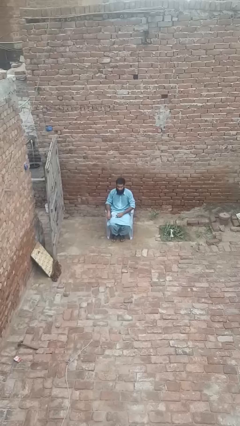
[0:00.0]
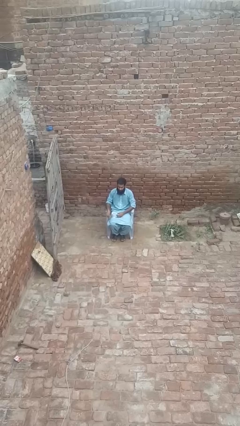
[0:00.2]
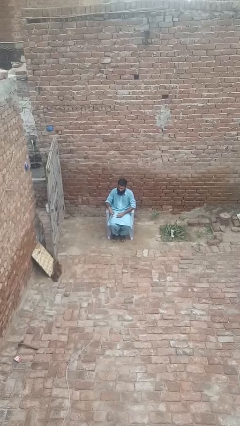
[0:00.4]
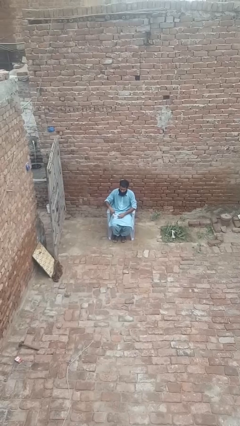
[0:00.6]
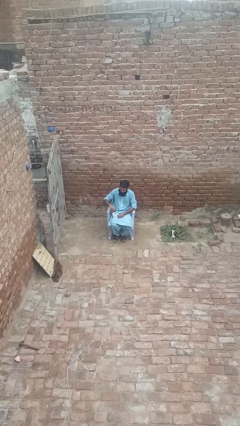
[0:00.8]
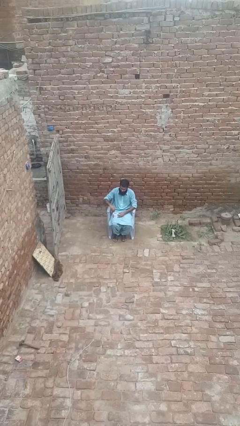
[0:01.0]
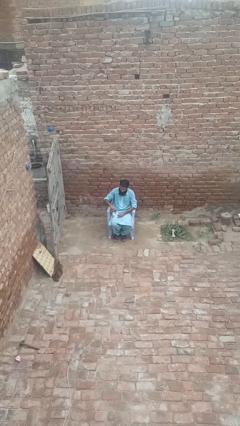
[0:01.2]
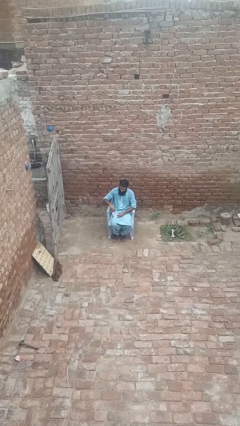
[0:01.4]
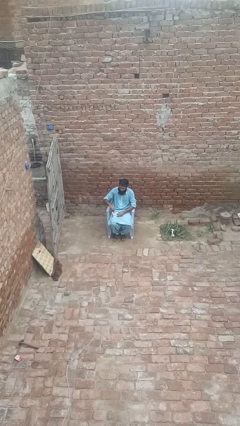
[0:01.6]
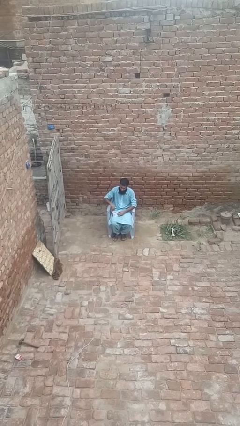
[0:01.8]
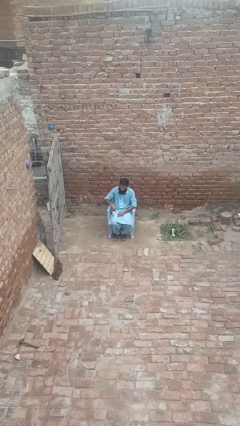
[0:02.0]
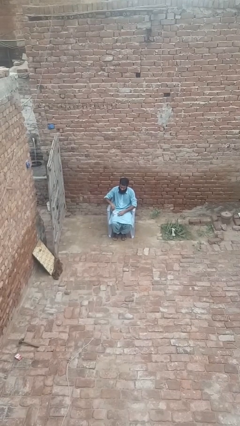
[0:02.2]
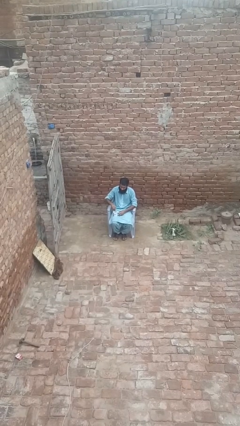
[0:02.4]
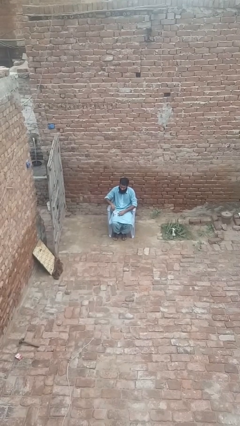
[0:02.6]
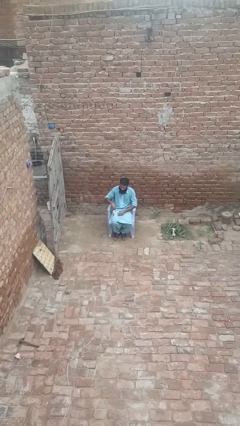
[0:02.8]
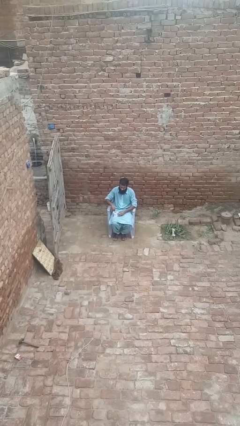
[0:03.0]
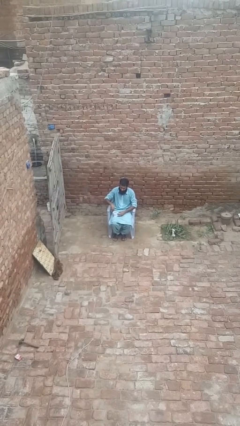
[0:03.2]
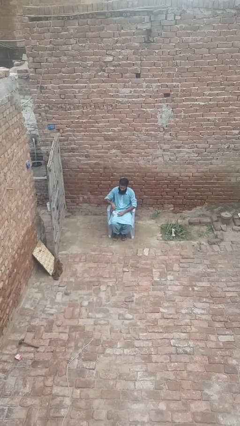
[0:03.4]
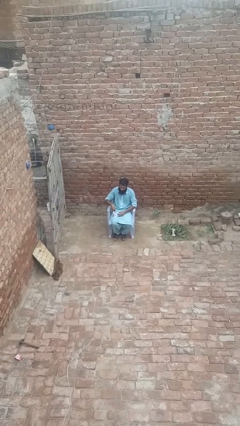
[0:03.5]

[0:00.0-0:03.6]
person stirs mug

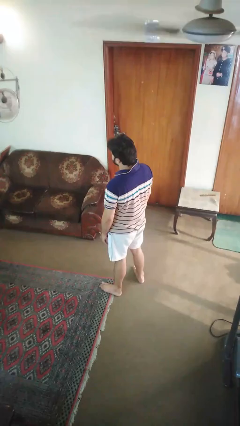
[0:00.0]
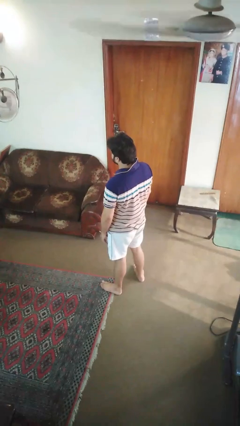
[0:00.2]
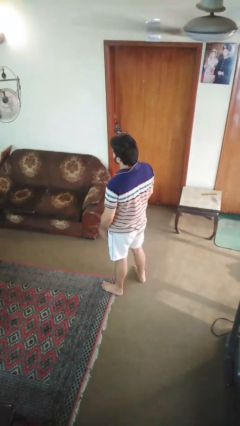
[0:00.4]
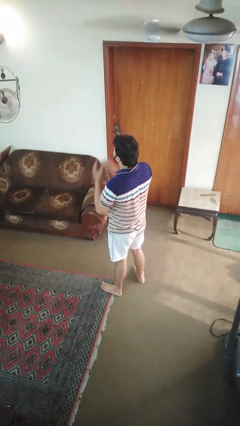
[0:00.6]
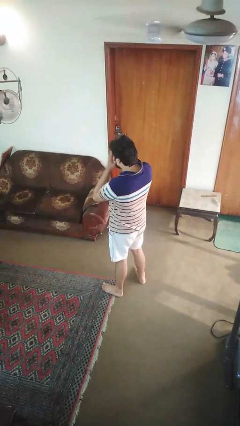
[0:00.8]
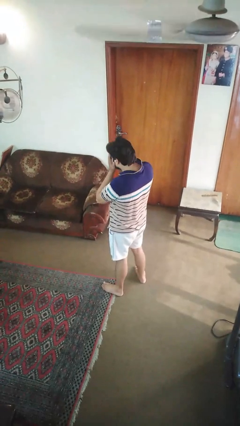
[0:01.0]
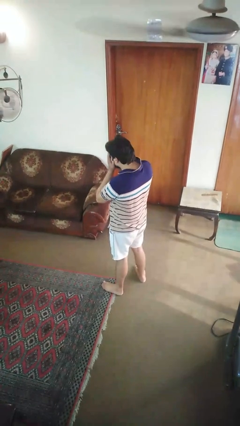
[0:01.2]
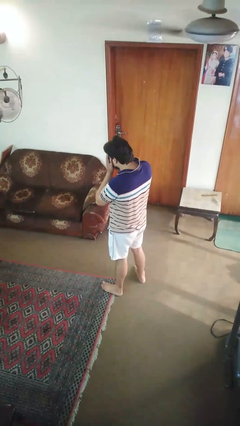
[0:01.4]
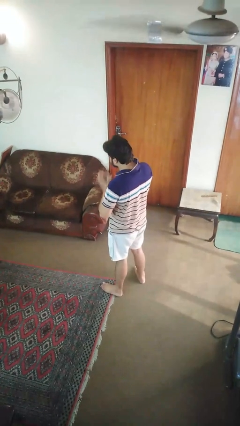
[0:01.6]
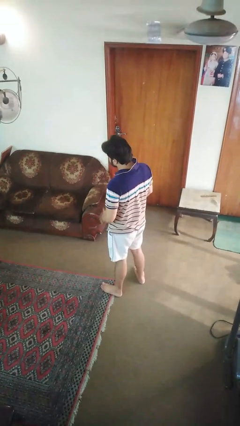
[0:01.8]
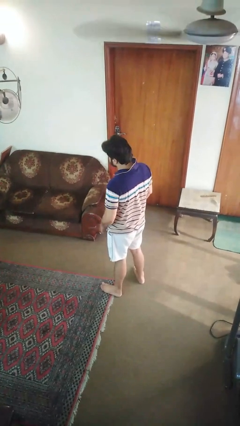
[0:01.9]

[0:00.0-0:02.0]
person sneezes into hand

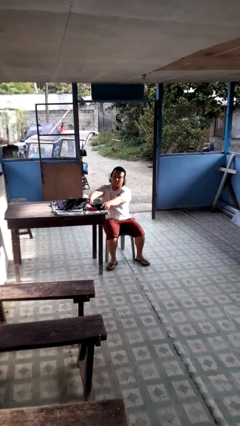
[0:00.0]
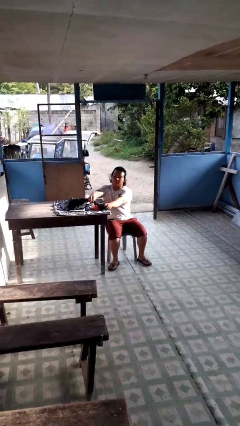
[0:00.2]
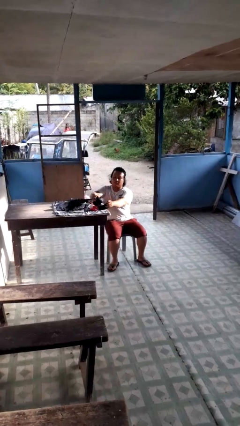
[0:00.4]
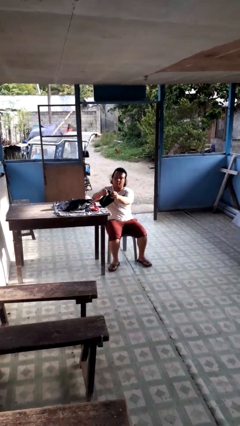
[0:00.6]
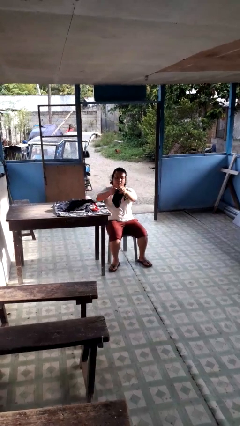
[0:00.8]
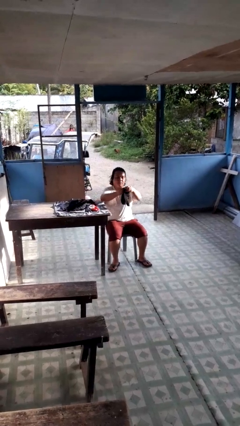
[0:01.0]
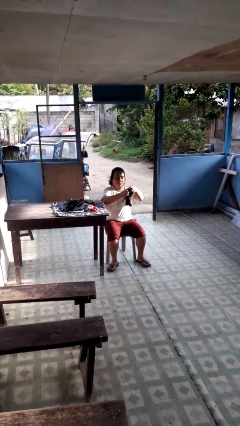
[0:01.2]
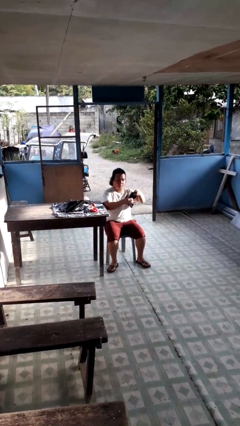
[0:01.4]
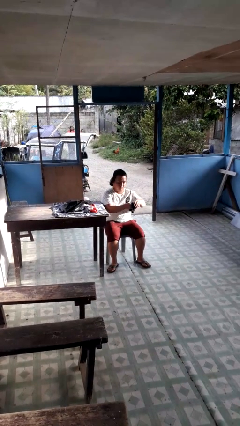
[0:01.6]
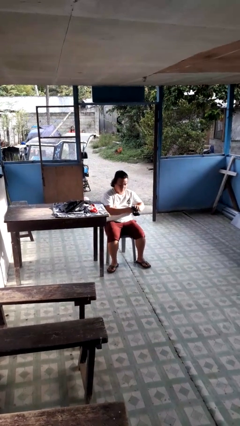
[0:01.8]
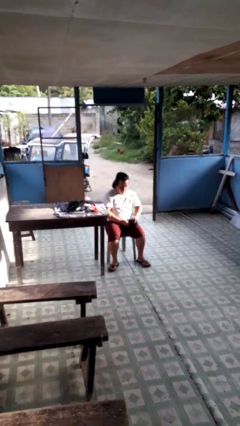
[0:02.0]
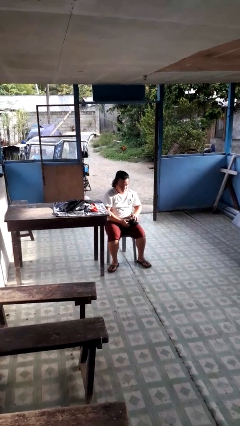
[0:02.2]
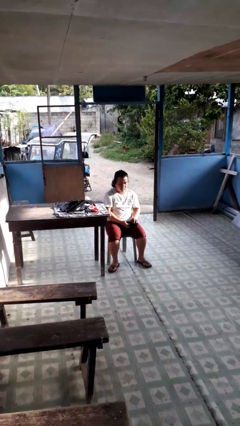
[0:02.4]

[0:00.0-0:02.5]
person folds socks

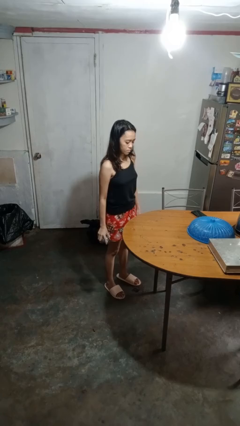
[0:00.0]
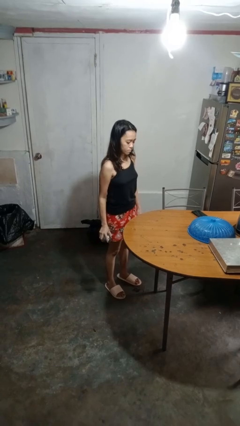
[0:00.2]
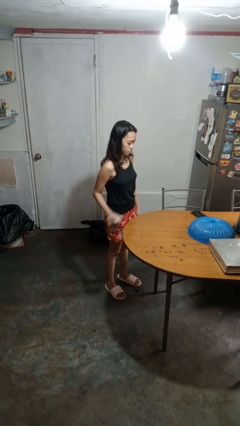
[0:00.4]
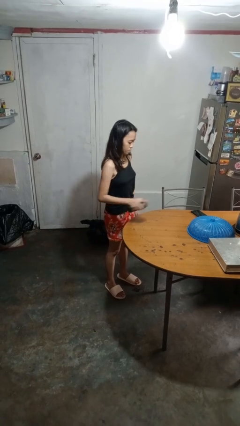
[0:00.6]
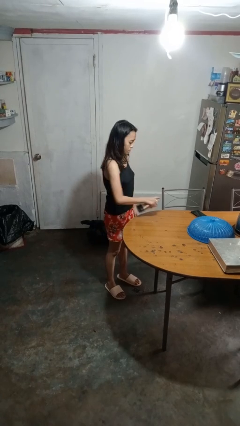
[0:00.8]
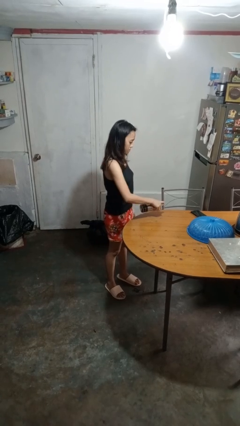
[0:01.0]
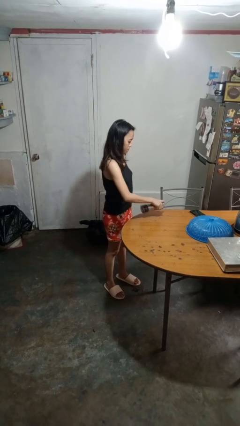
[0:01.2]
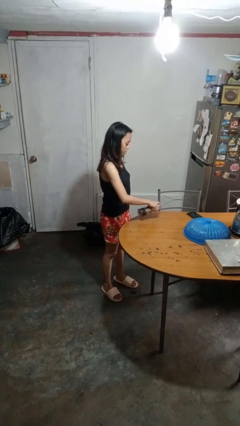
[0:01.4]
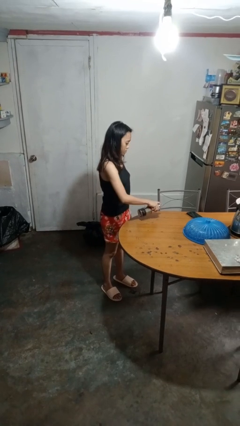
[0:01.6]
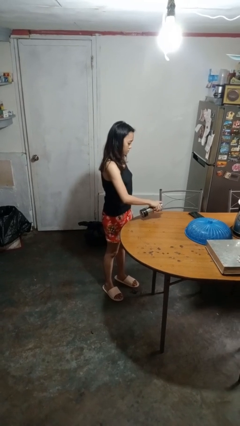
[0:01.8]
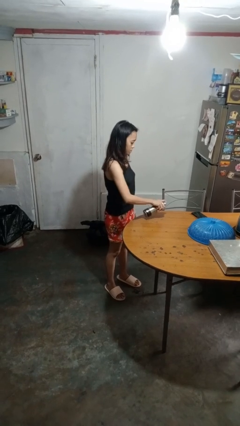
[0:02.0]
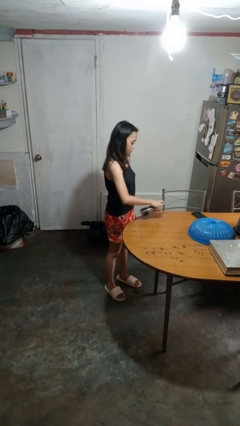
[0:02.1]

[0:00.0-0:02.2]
person sprays from bottle

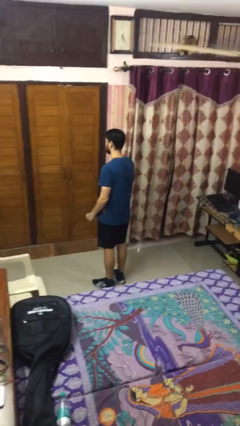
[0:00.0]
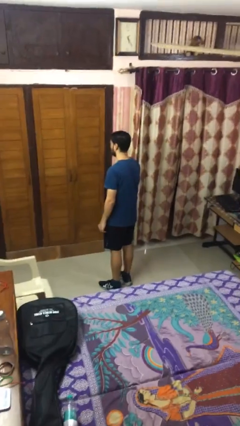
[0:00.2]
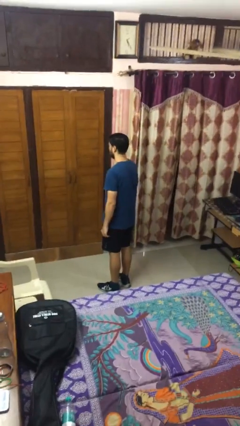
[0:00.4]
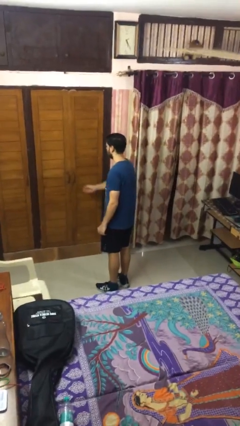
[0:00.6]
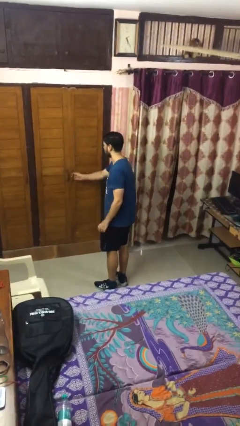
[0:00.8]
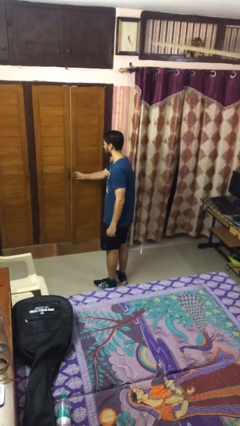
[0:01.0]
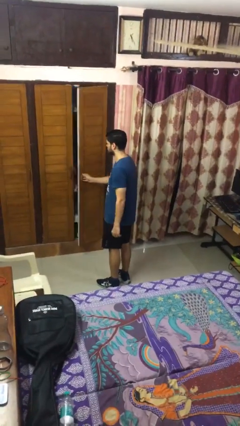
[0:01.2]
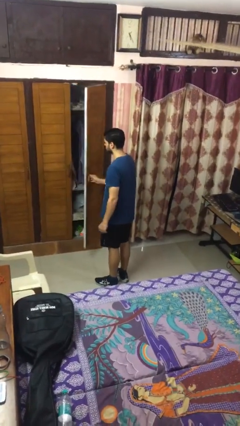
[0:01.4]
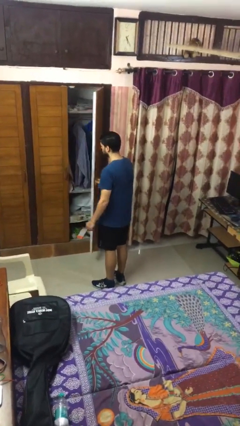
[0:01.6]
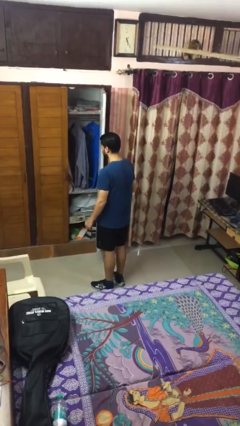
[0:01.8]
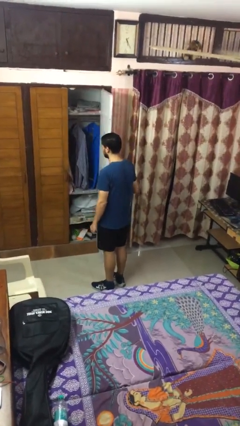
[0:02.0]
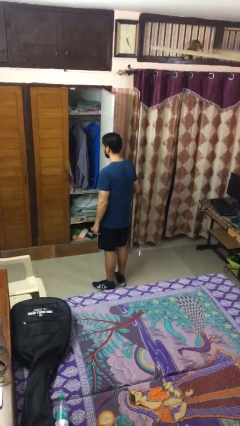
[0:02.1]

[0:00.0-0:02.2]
person opens closet door

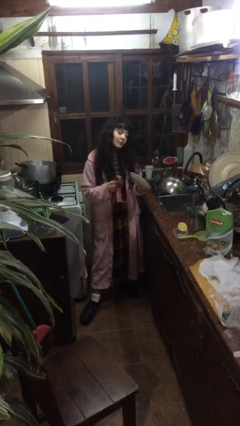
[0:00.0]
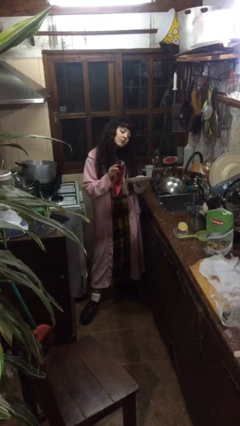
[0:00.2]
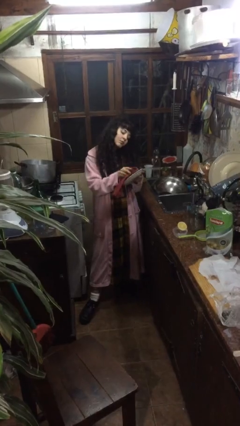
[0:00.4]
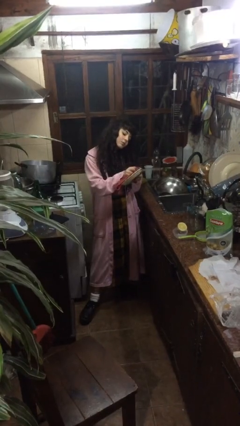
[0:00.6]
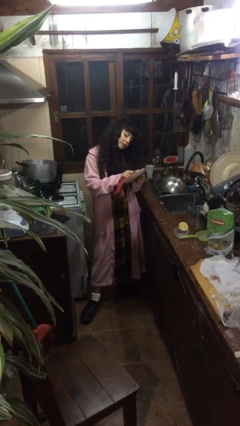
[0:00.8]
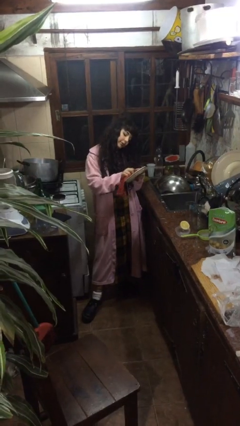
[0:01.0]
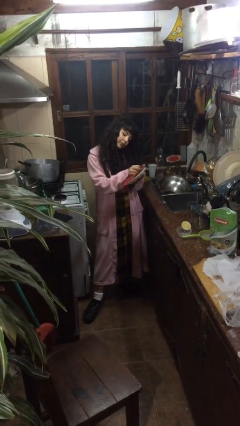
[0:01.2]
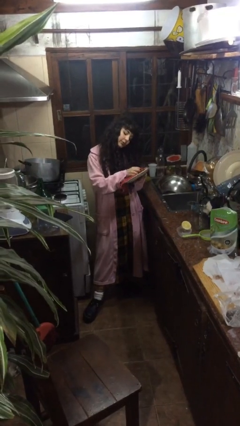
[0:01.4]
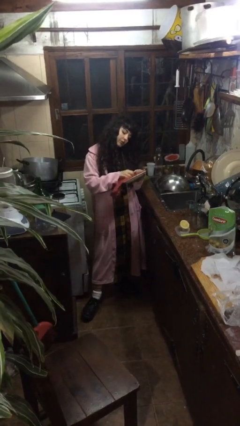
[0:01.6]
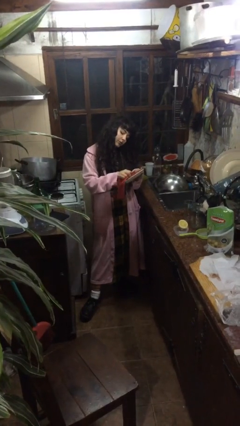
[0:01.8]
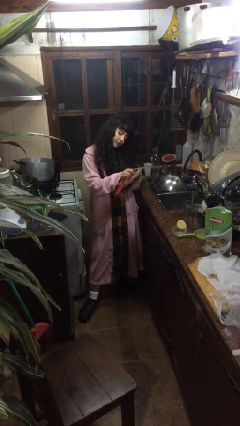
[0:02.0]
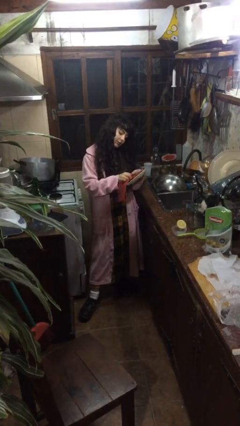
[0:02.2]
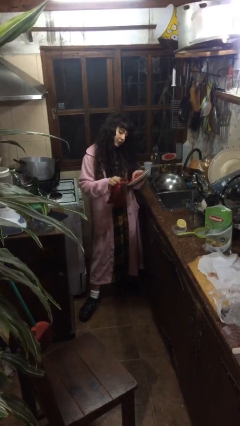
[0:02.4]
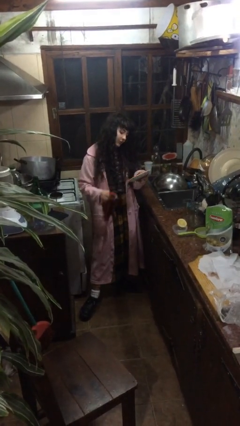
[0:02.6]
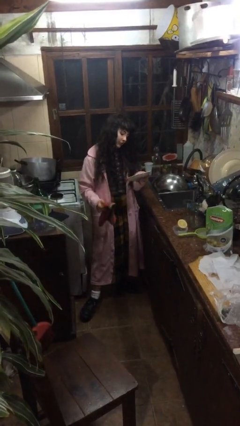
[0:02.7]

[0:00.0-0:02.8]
person dries dish

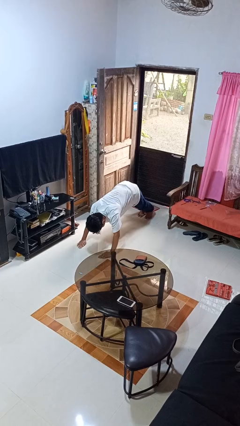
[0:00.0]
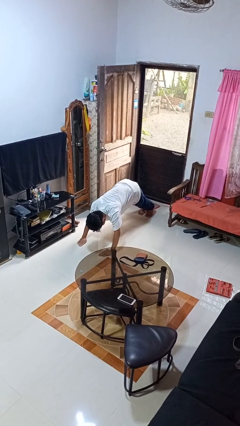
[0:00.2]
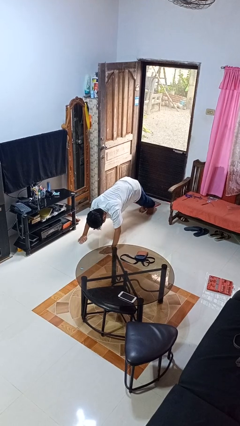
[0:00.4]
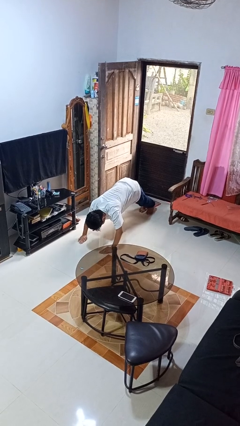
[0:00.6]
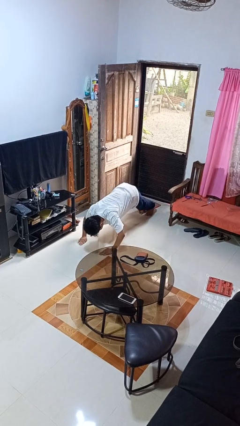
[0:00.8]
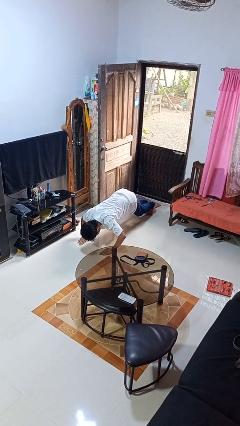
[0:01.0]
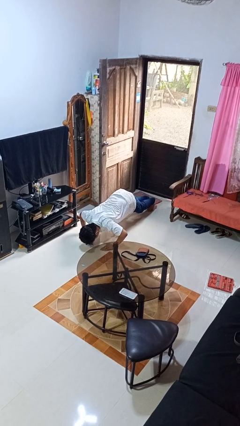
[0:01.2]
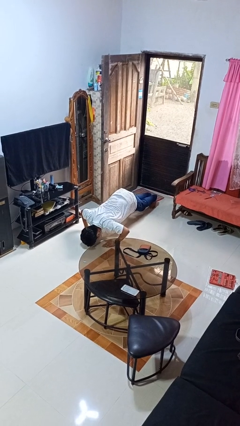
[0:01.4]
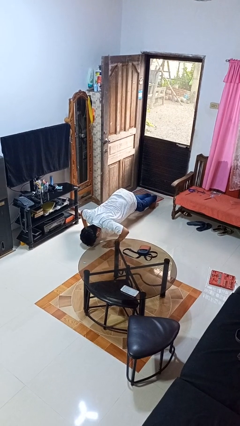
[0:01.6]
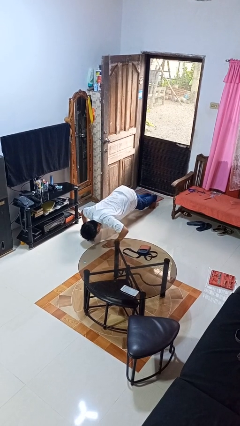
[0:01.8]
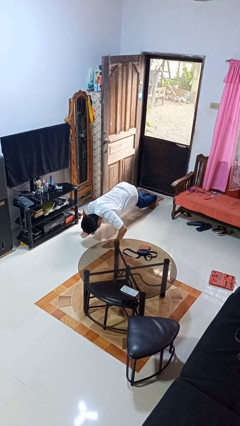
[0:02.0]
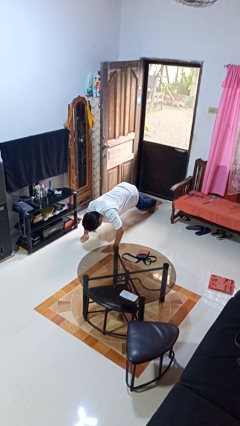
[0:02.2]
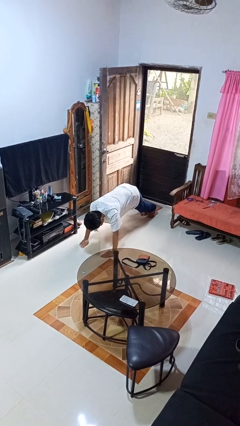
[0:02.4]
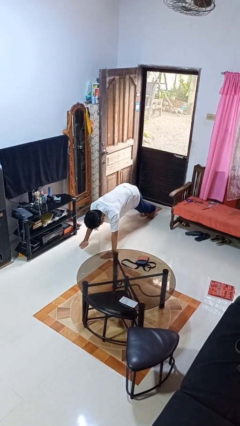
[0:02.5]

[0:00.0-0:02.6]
person exercises with pushup
